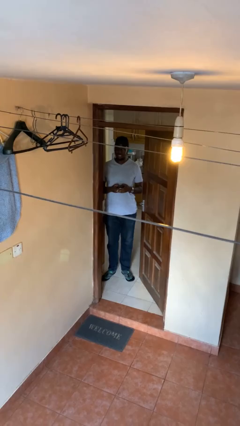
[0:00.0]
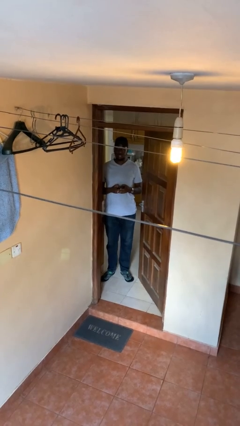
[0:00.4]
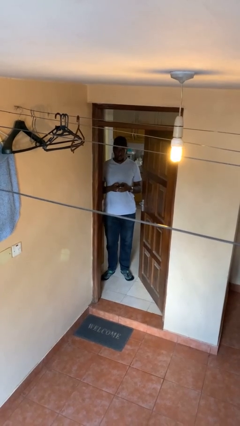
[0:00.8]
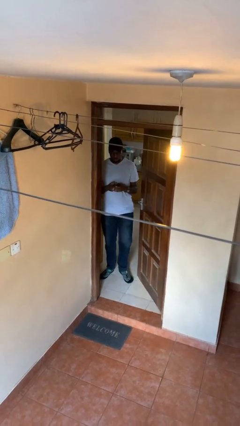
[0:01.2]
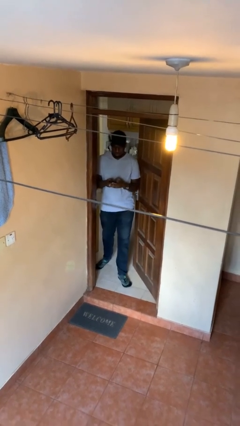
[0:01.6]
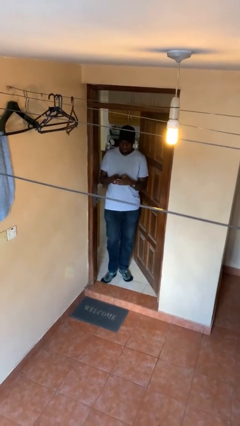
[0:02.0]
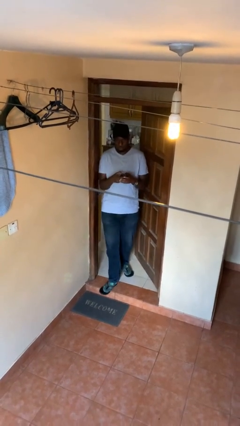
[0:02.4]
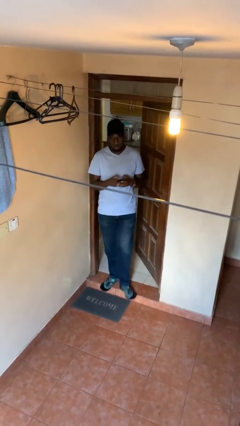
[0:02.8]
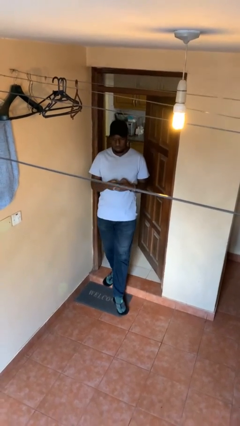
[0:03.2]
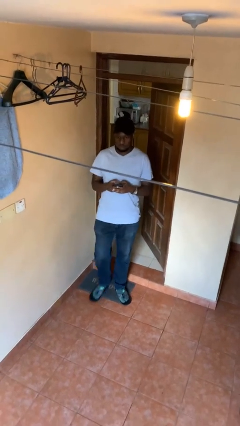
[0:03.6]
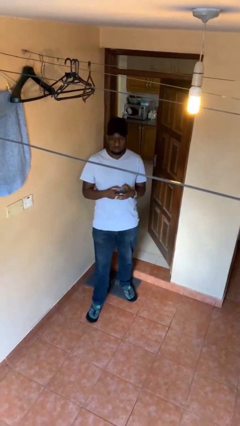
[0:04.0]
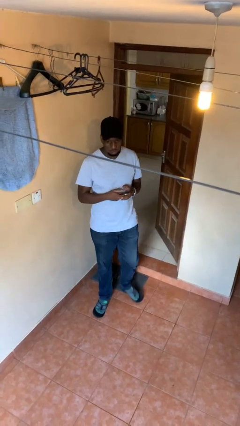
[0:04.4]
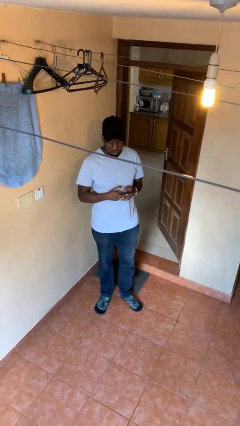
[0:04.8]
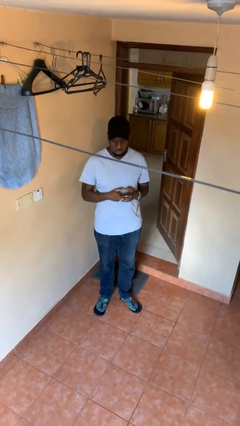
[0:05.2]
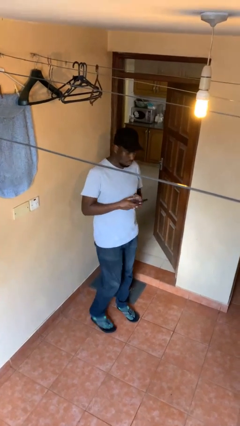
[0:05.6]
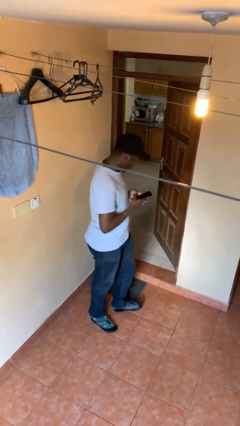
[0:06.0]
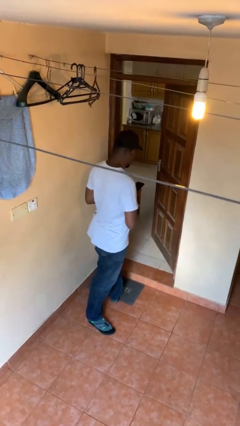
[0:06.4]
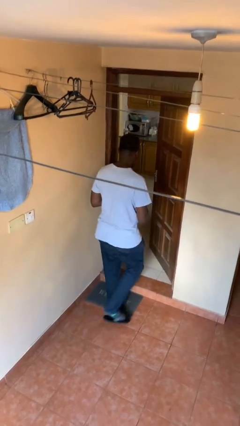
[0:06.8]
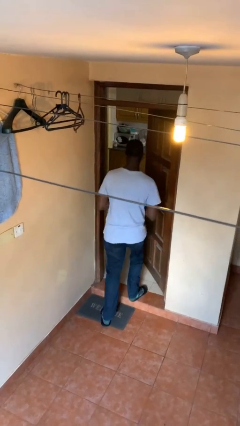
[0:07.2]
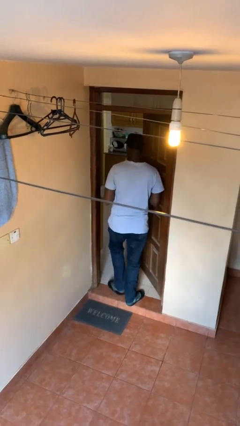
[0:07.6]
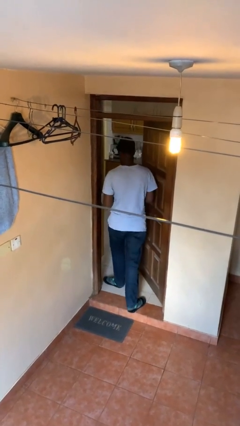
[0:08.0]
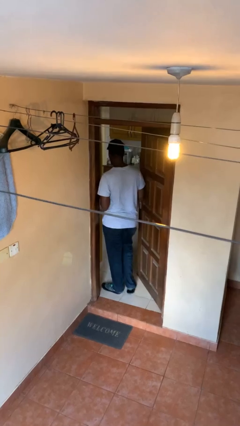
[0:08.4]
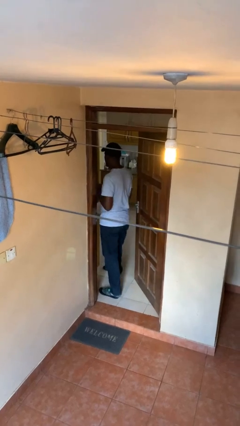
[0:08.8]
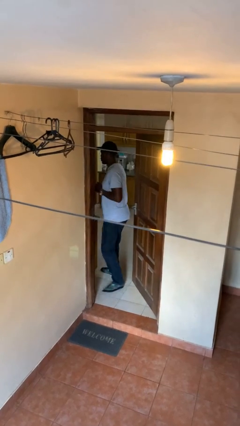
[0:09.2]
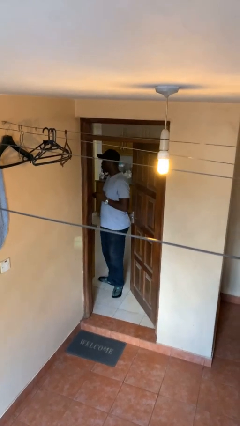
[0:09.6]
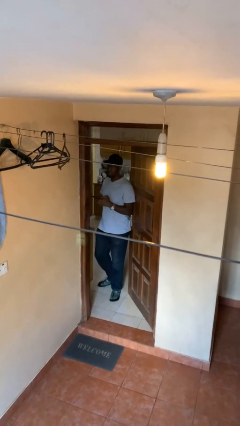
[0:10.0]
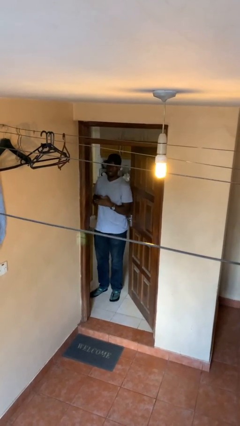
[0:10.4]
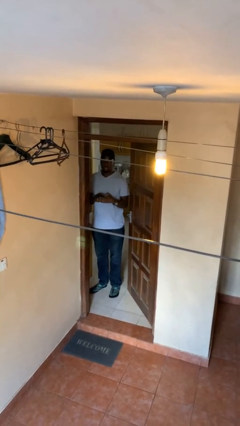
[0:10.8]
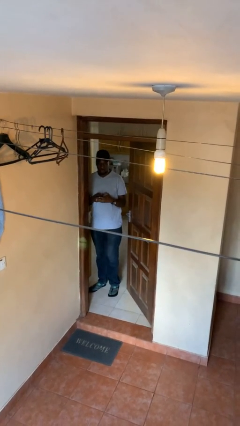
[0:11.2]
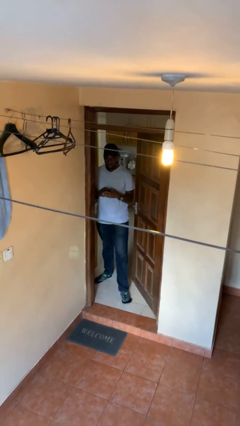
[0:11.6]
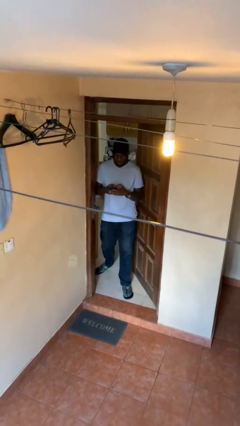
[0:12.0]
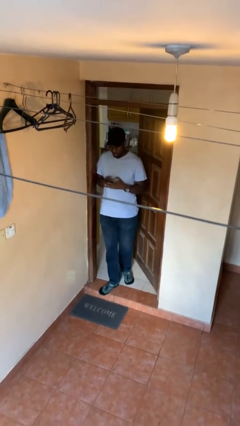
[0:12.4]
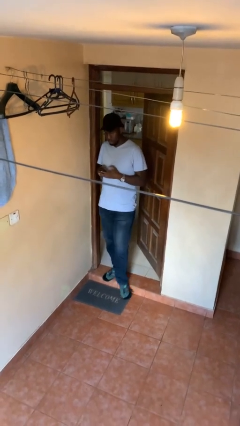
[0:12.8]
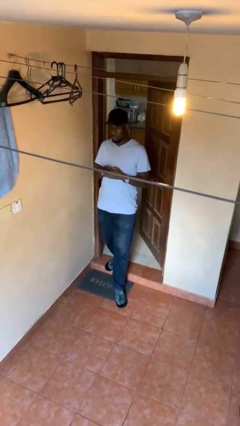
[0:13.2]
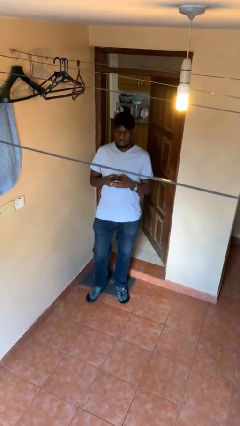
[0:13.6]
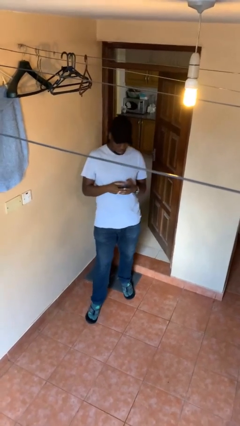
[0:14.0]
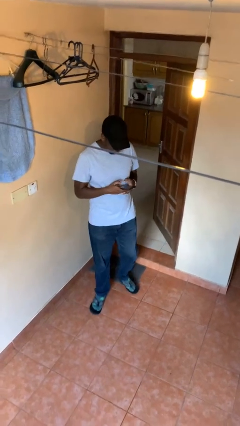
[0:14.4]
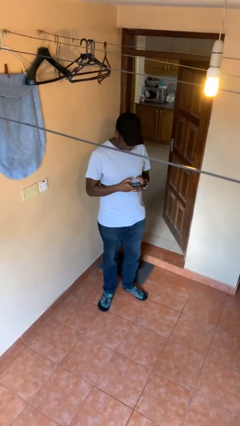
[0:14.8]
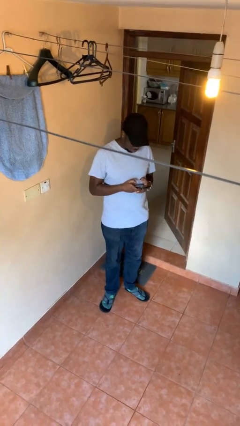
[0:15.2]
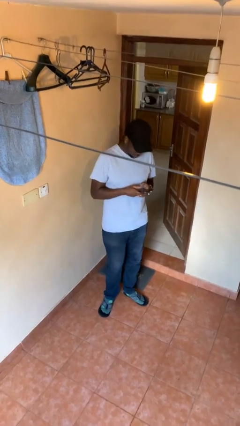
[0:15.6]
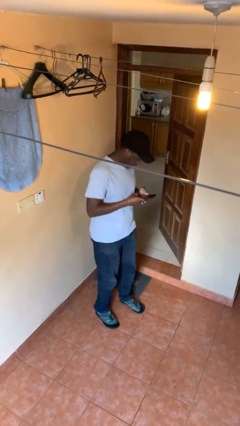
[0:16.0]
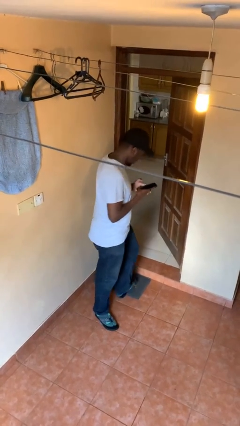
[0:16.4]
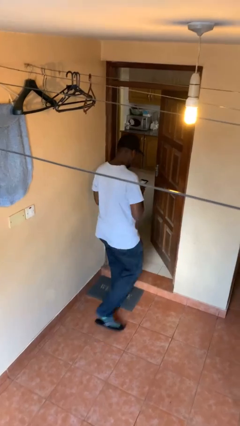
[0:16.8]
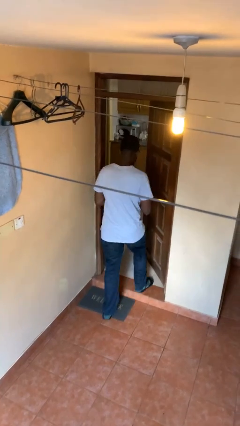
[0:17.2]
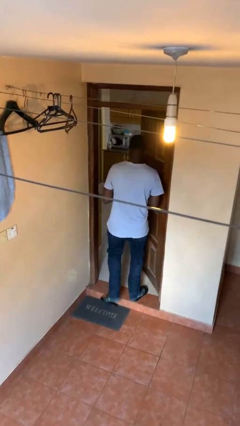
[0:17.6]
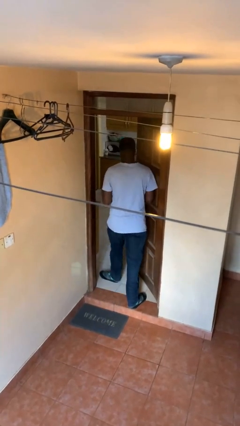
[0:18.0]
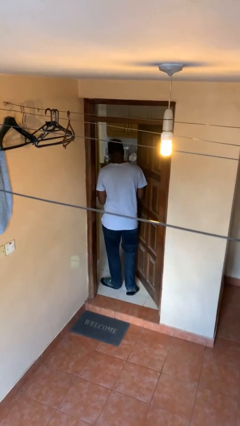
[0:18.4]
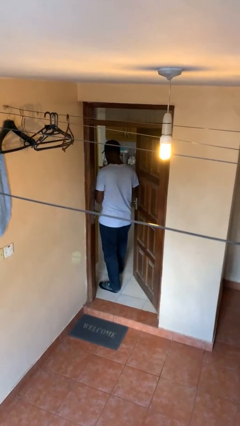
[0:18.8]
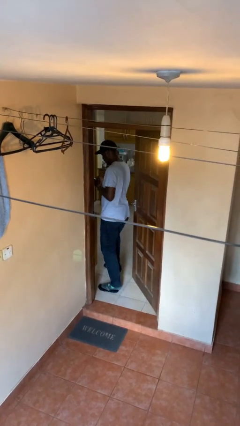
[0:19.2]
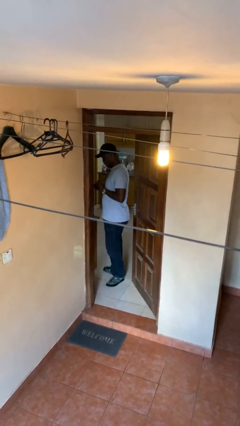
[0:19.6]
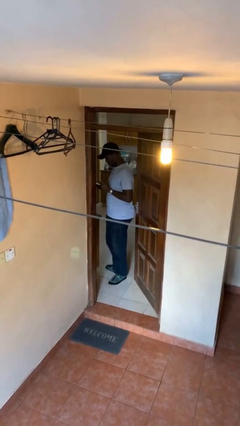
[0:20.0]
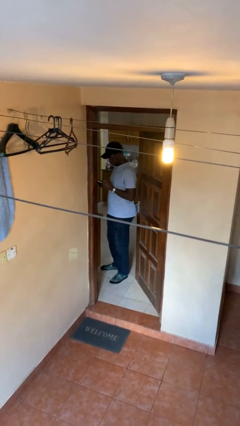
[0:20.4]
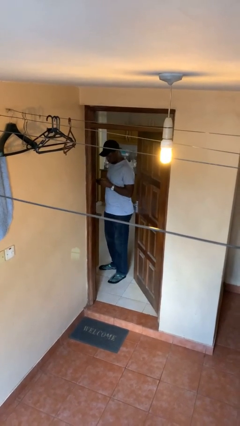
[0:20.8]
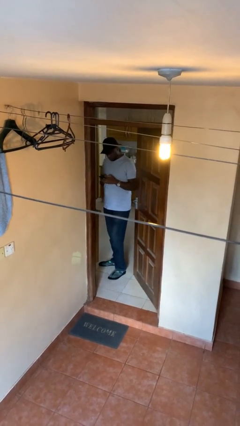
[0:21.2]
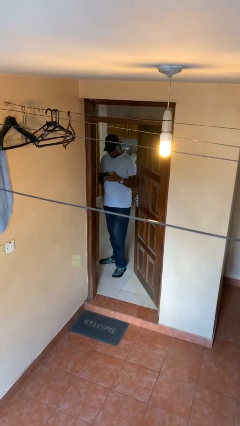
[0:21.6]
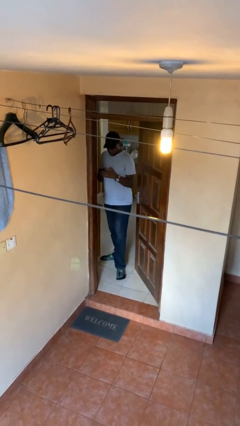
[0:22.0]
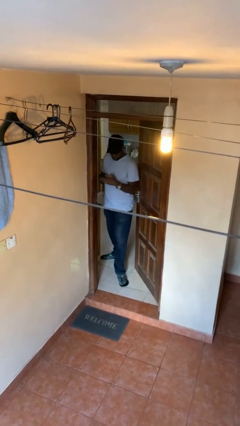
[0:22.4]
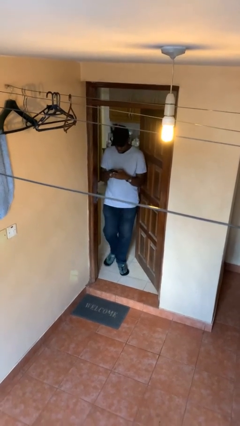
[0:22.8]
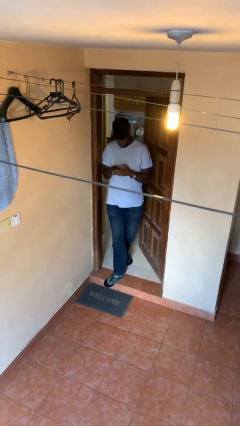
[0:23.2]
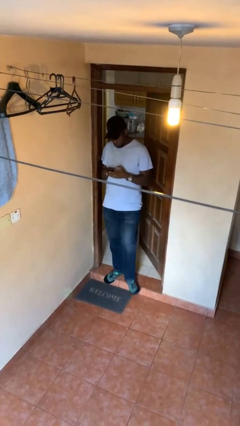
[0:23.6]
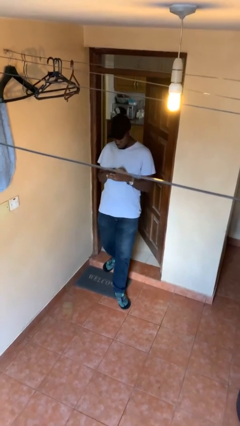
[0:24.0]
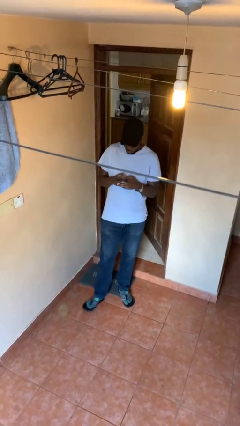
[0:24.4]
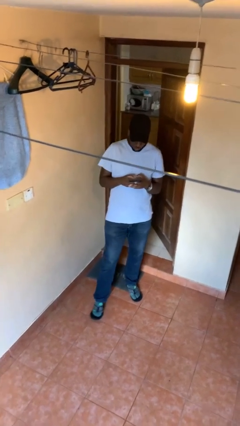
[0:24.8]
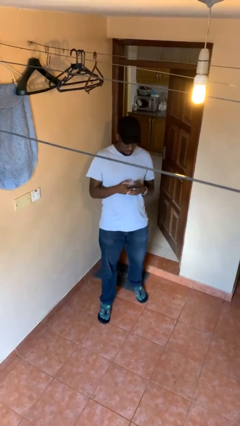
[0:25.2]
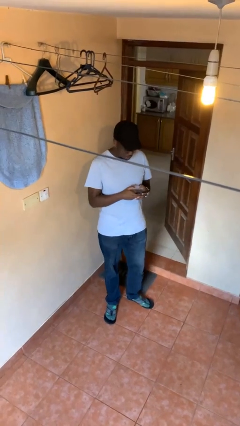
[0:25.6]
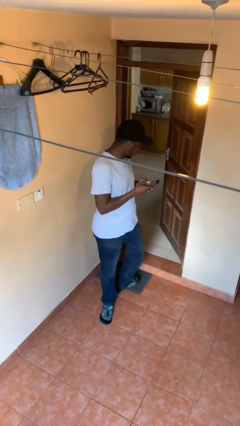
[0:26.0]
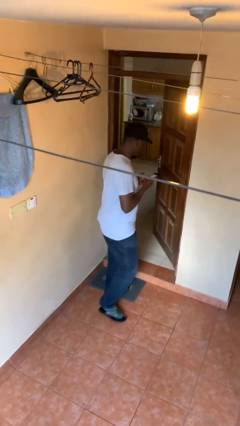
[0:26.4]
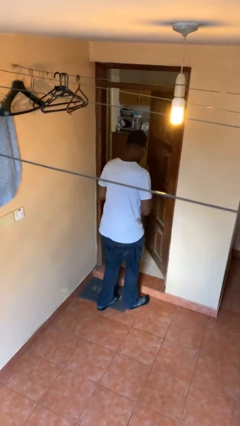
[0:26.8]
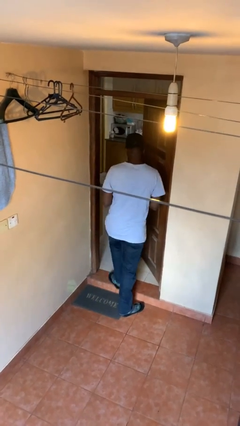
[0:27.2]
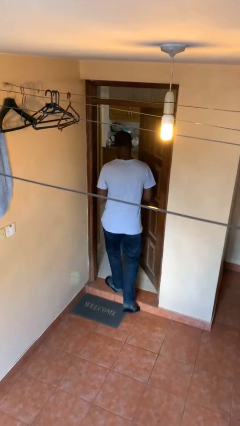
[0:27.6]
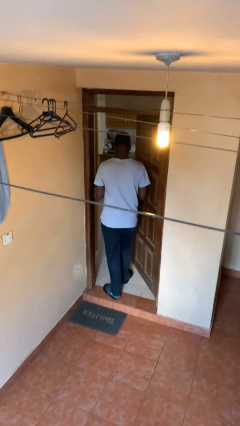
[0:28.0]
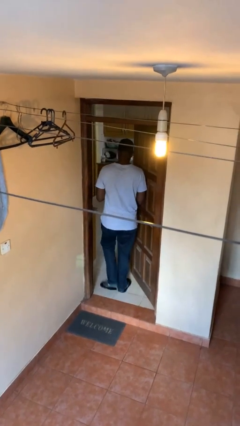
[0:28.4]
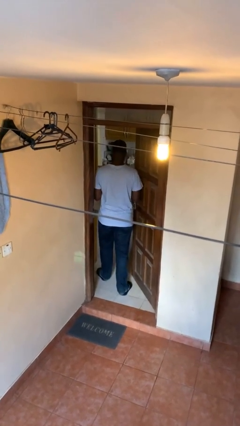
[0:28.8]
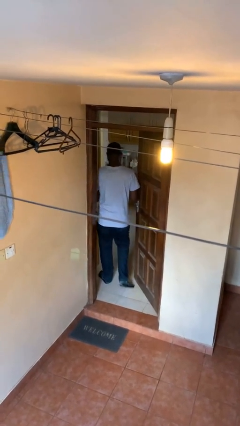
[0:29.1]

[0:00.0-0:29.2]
person texts on phone

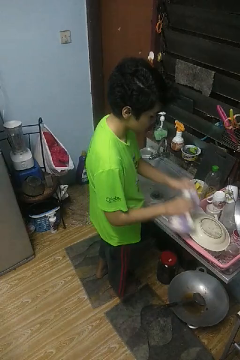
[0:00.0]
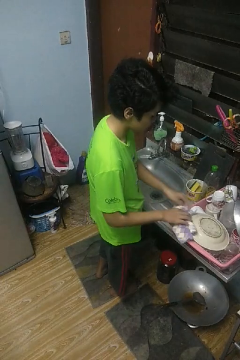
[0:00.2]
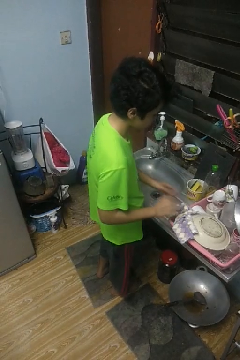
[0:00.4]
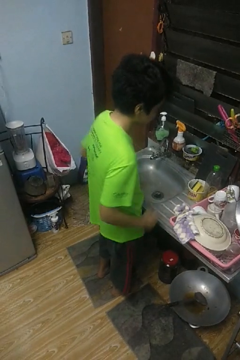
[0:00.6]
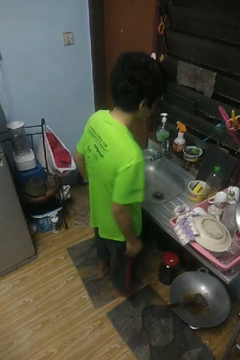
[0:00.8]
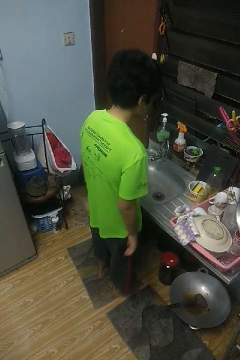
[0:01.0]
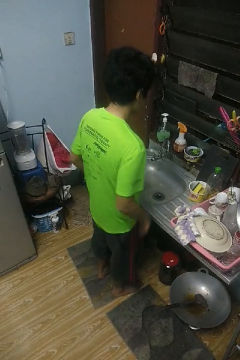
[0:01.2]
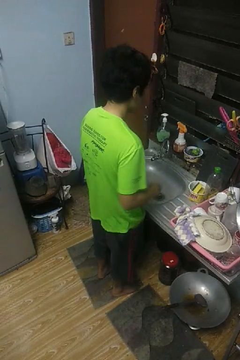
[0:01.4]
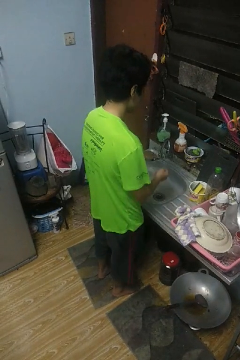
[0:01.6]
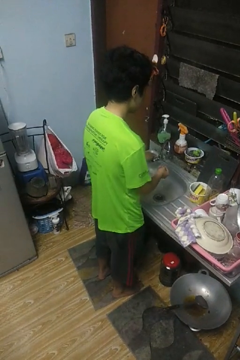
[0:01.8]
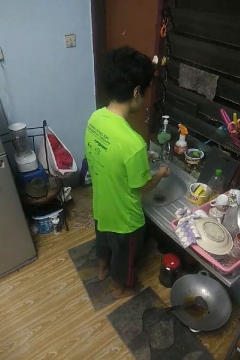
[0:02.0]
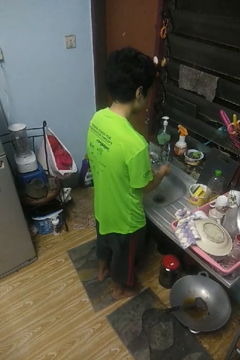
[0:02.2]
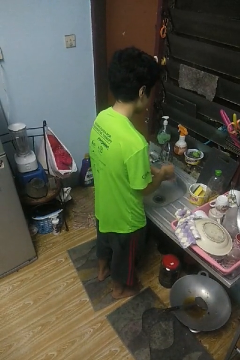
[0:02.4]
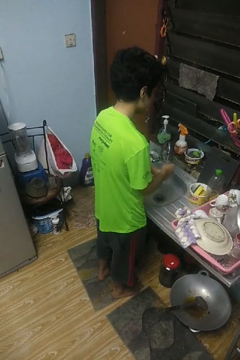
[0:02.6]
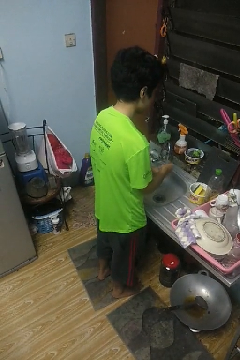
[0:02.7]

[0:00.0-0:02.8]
person washes hands

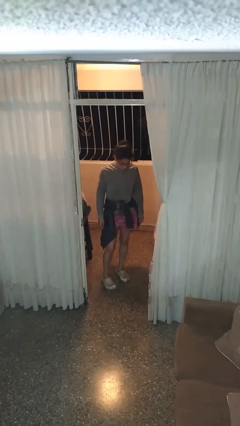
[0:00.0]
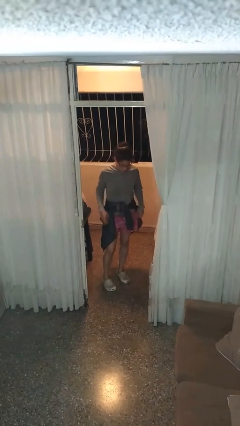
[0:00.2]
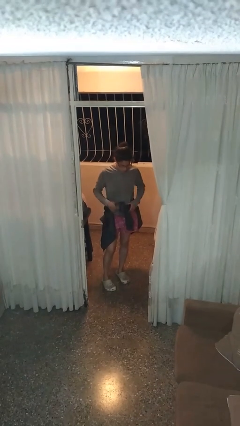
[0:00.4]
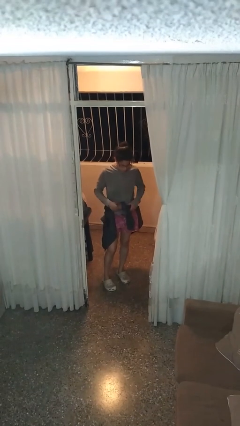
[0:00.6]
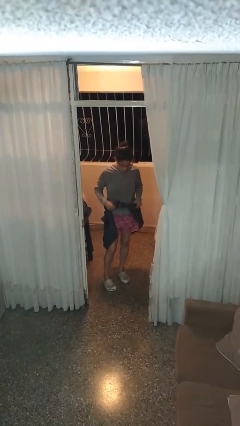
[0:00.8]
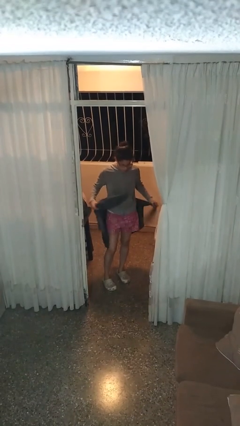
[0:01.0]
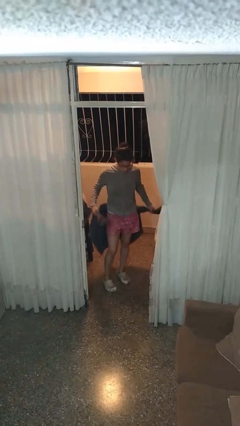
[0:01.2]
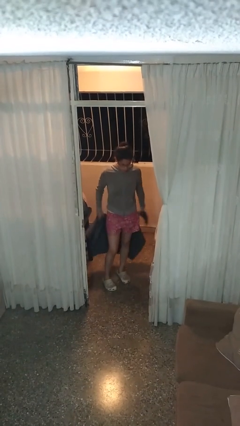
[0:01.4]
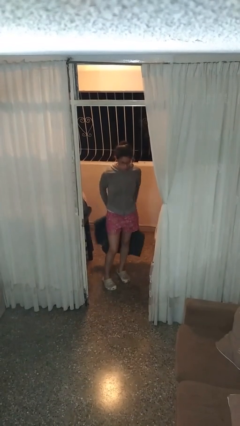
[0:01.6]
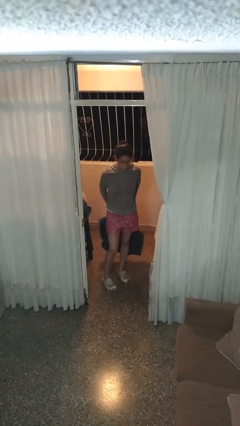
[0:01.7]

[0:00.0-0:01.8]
person unties jacket around waist
